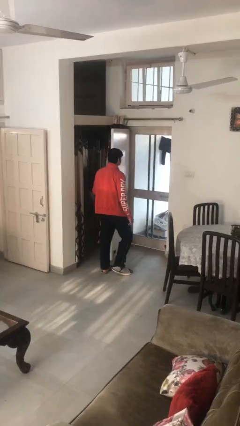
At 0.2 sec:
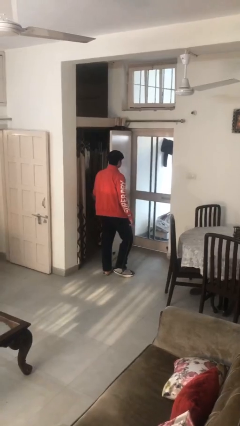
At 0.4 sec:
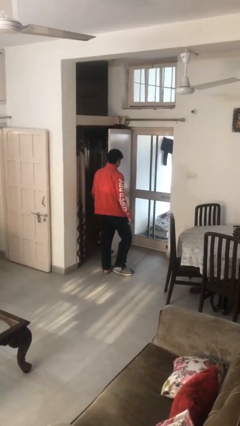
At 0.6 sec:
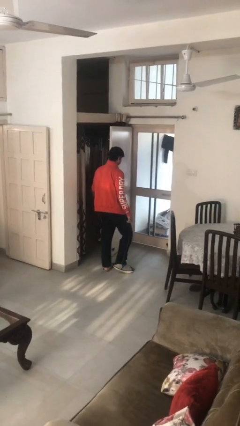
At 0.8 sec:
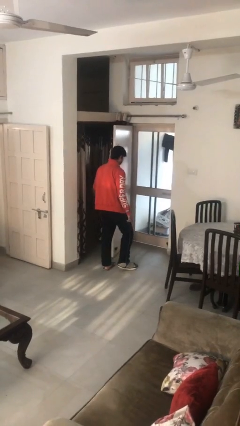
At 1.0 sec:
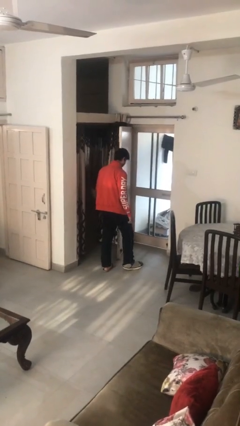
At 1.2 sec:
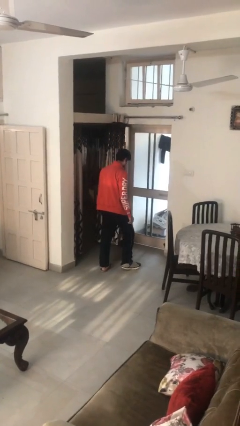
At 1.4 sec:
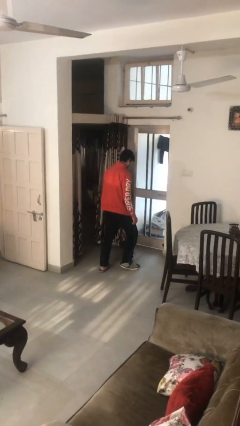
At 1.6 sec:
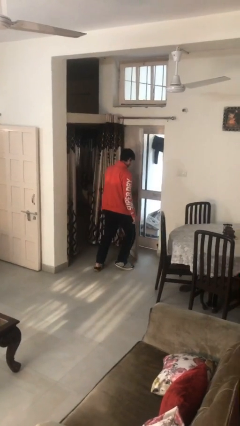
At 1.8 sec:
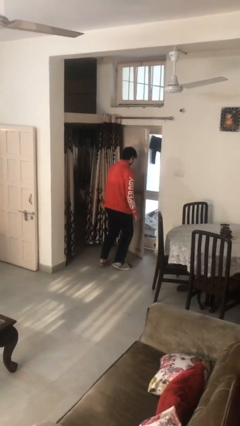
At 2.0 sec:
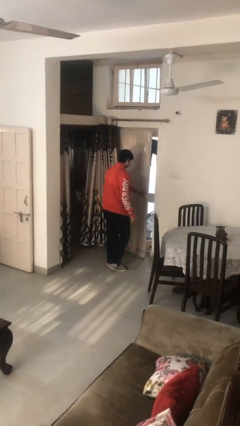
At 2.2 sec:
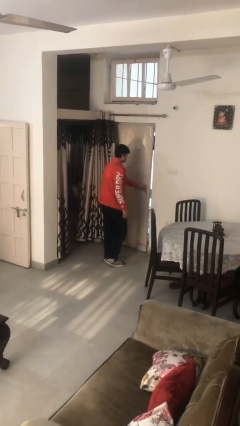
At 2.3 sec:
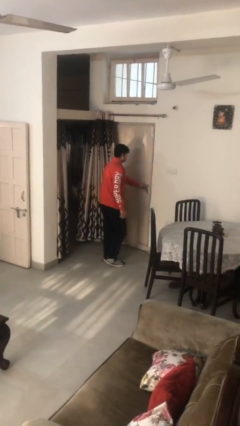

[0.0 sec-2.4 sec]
person closes facility door

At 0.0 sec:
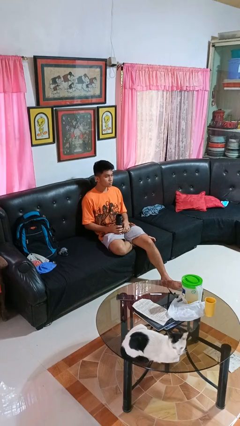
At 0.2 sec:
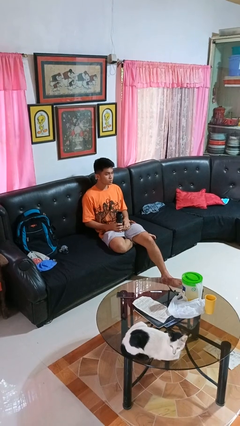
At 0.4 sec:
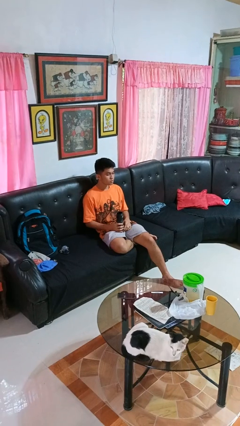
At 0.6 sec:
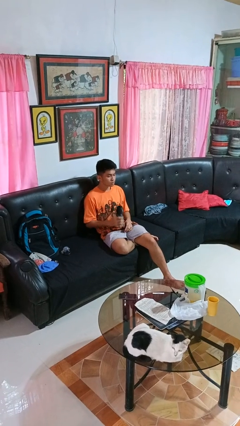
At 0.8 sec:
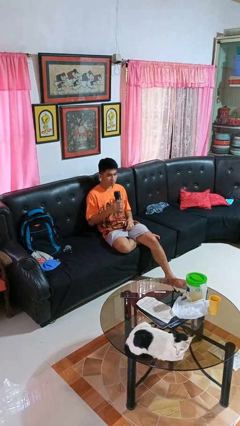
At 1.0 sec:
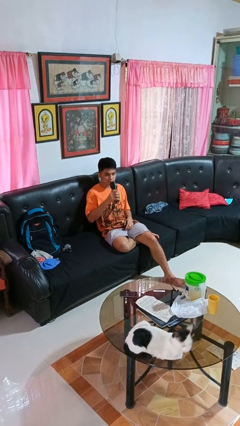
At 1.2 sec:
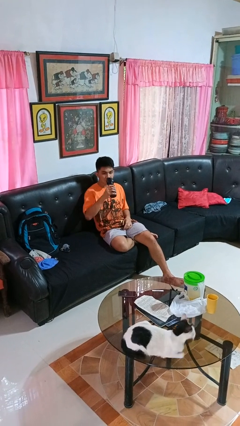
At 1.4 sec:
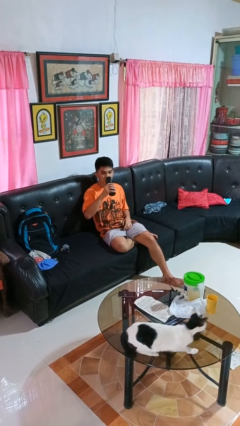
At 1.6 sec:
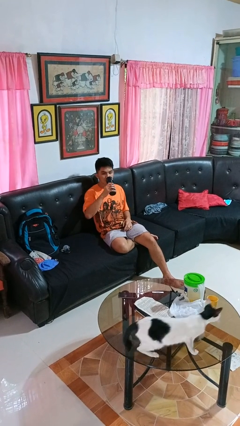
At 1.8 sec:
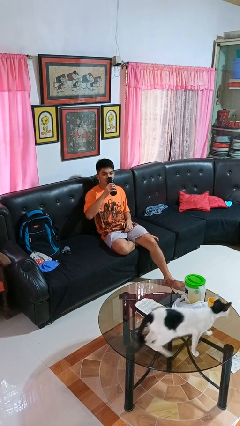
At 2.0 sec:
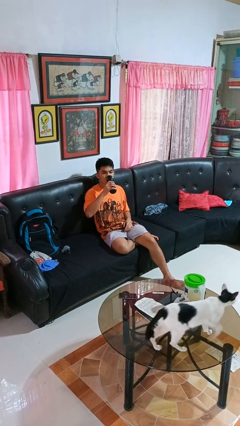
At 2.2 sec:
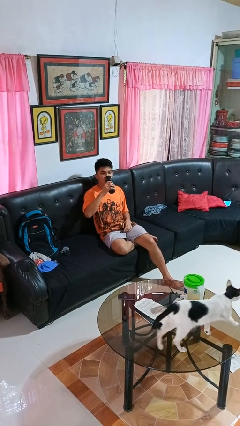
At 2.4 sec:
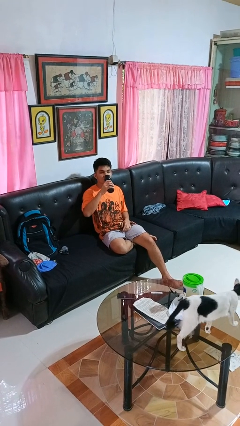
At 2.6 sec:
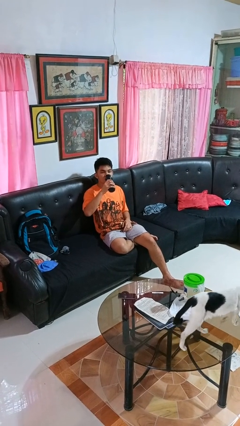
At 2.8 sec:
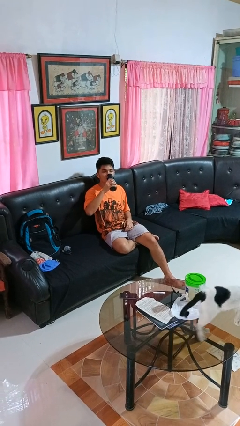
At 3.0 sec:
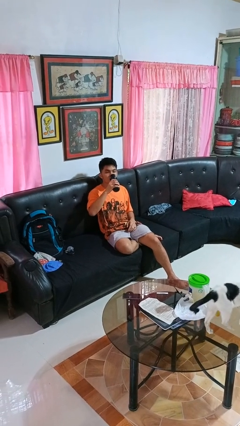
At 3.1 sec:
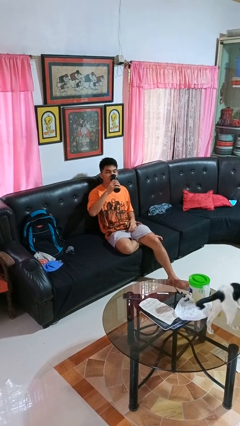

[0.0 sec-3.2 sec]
person drinks from bottle

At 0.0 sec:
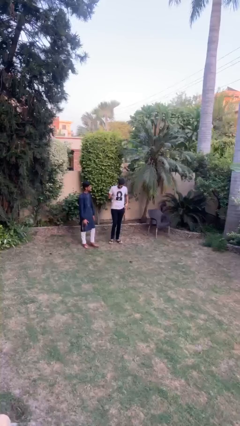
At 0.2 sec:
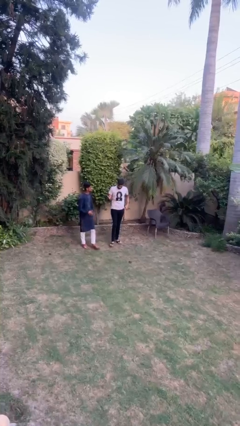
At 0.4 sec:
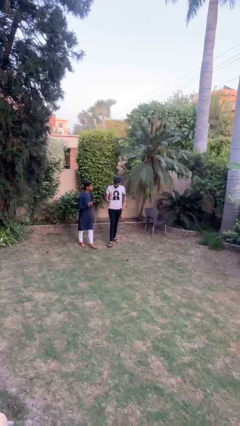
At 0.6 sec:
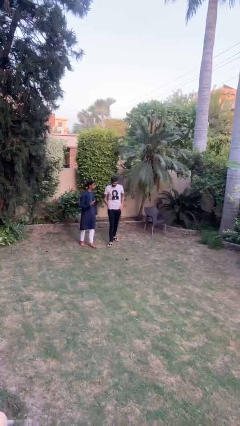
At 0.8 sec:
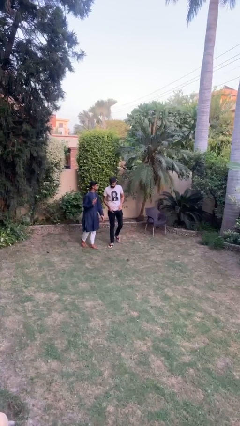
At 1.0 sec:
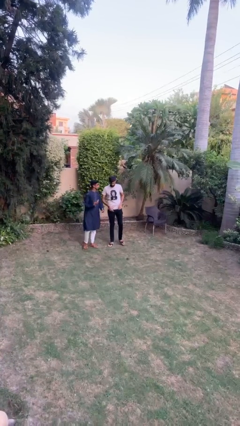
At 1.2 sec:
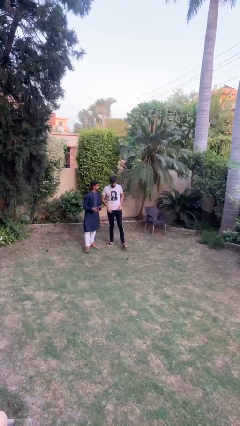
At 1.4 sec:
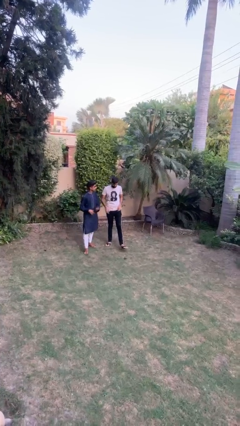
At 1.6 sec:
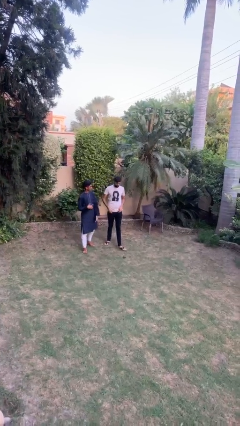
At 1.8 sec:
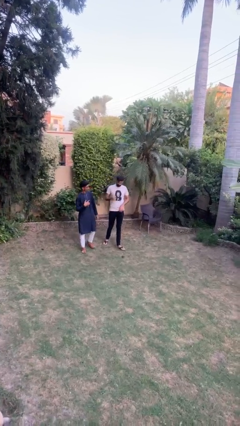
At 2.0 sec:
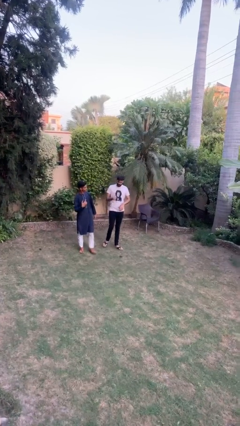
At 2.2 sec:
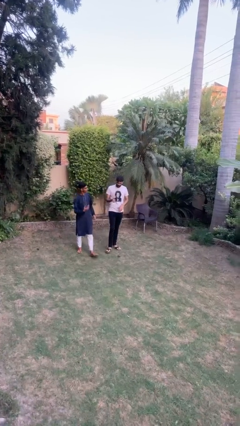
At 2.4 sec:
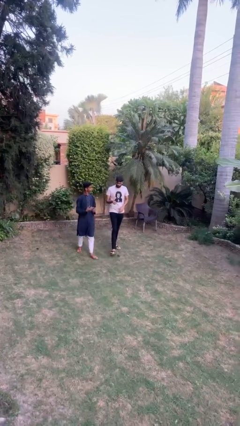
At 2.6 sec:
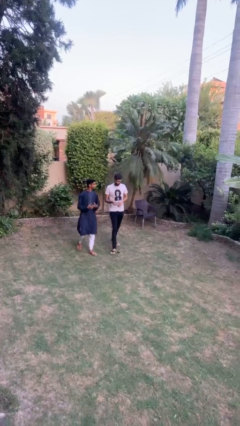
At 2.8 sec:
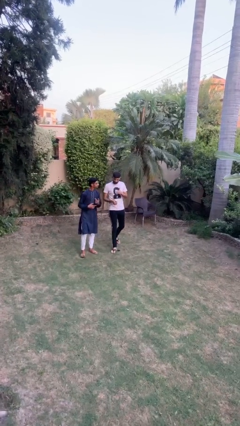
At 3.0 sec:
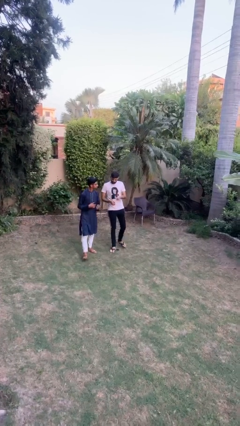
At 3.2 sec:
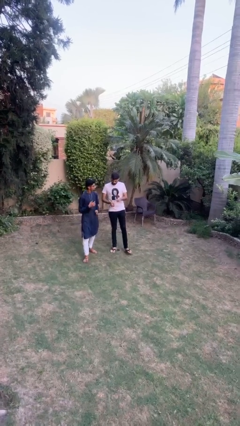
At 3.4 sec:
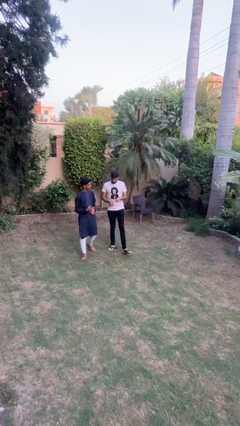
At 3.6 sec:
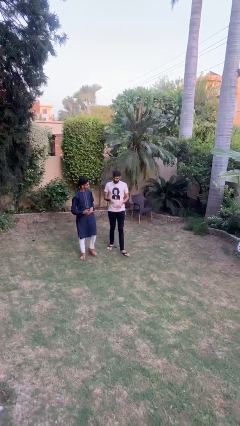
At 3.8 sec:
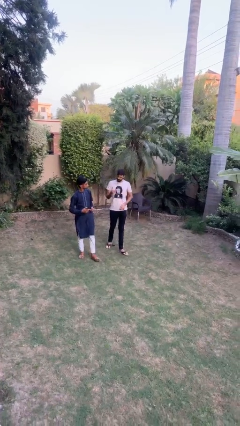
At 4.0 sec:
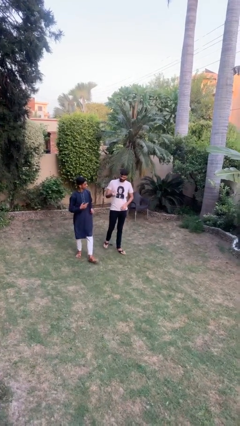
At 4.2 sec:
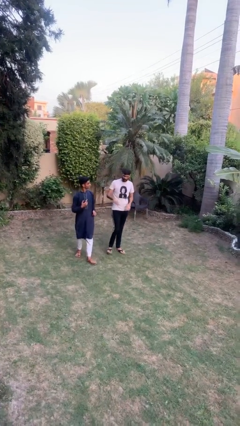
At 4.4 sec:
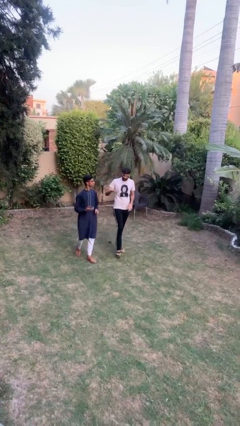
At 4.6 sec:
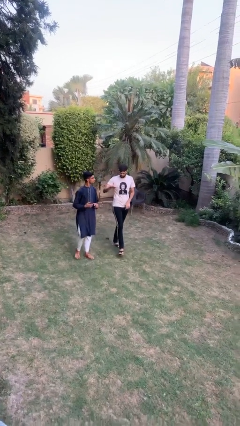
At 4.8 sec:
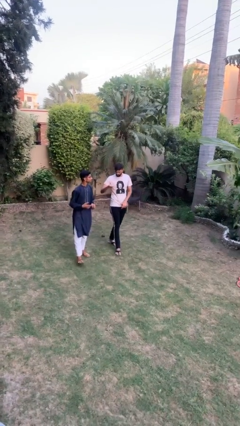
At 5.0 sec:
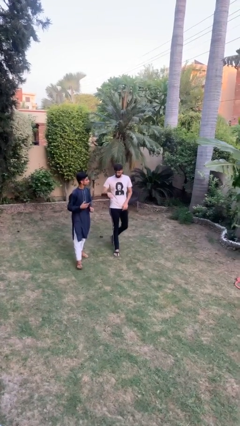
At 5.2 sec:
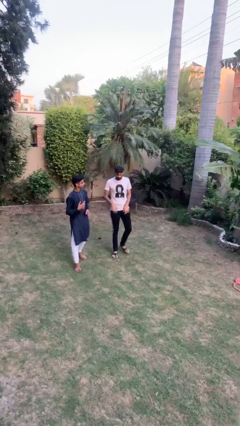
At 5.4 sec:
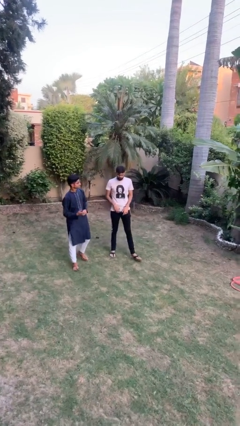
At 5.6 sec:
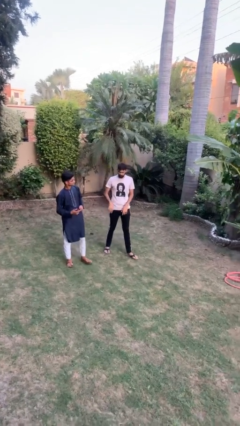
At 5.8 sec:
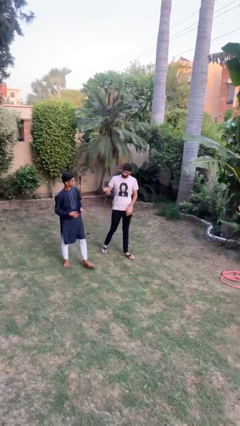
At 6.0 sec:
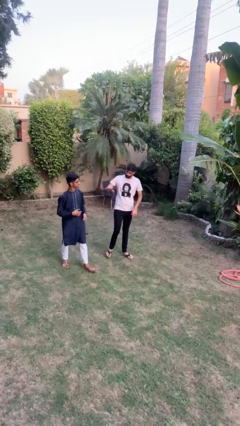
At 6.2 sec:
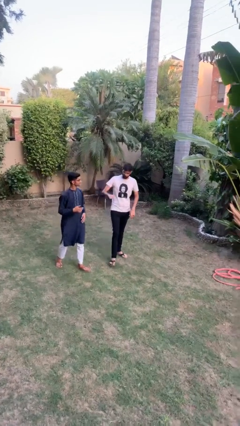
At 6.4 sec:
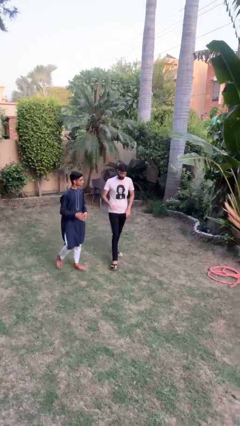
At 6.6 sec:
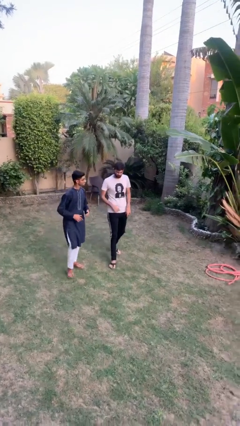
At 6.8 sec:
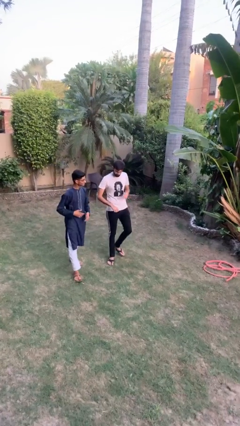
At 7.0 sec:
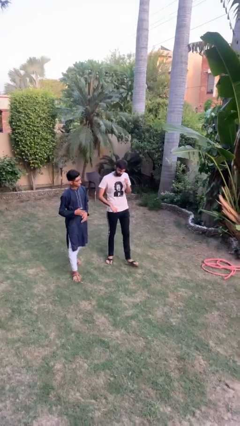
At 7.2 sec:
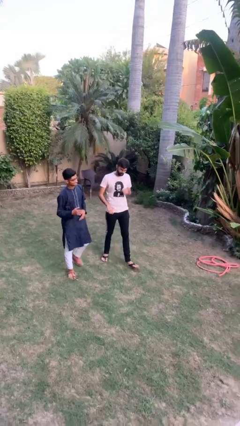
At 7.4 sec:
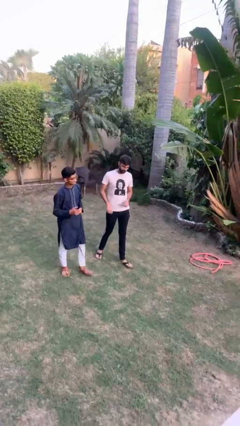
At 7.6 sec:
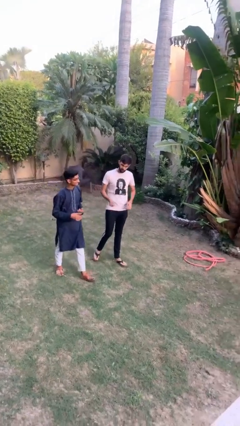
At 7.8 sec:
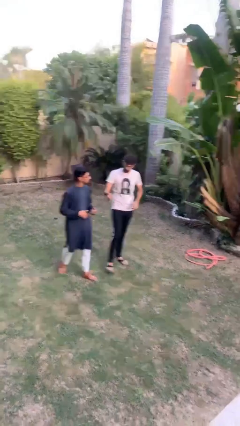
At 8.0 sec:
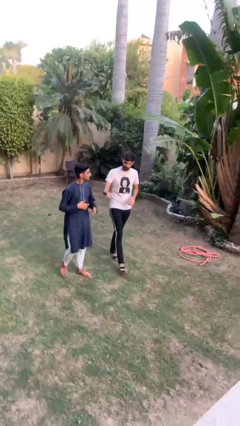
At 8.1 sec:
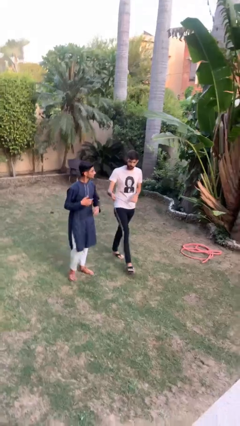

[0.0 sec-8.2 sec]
person talks to person

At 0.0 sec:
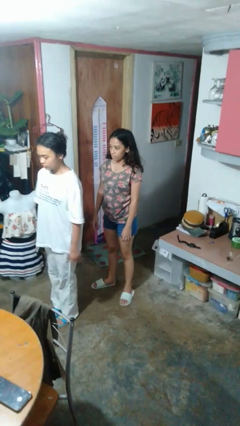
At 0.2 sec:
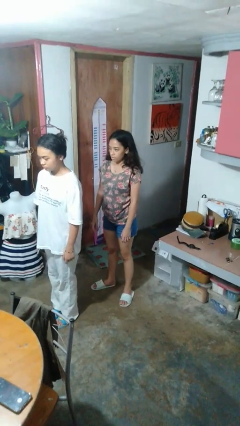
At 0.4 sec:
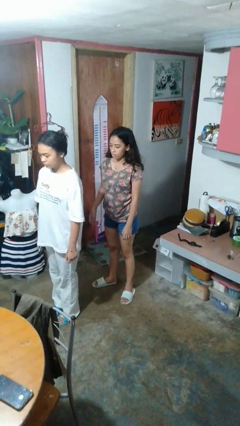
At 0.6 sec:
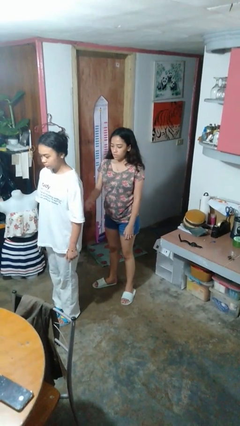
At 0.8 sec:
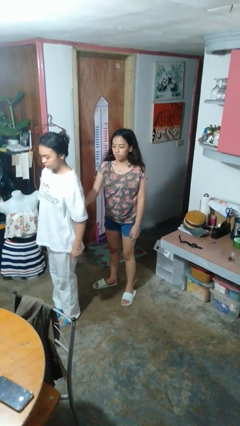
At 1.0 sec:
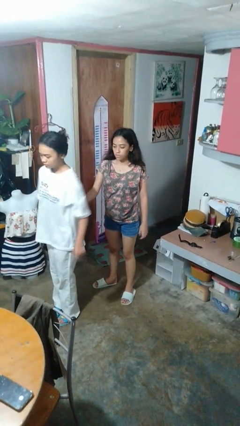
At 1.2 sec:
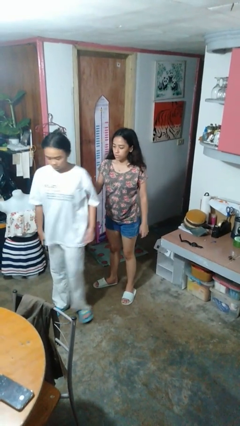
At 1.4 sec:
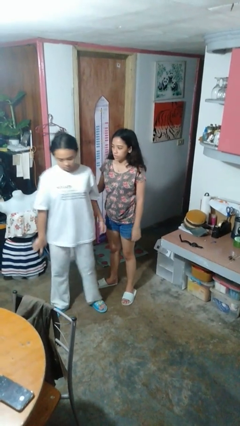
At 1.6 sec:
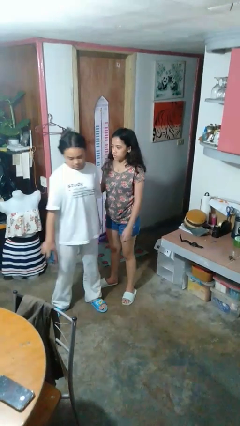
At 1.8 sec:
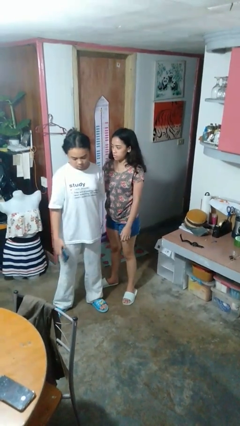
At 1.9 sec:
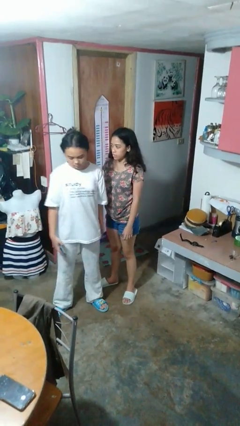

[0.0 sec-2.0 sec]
person grabs person by bicep

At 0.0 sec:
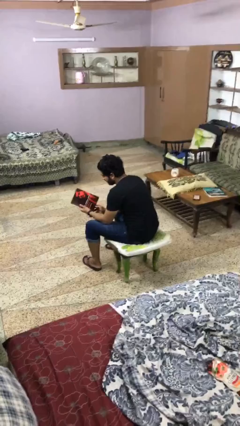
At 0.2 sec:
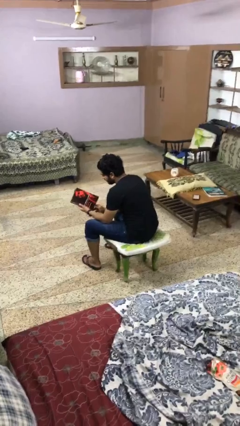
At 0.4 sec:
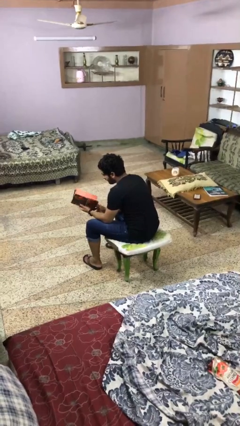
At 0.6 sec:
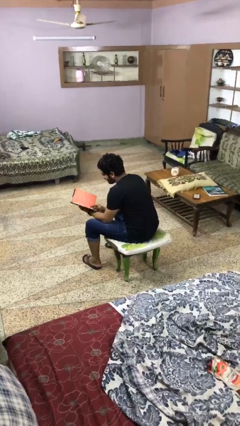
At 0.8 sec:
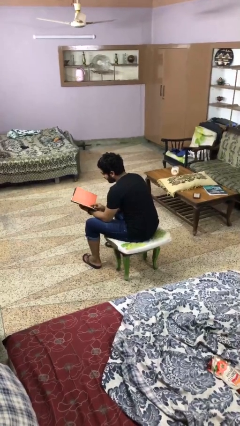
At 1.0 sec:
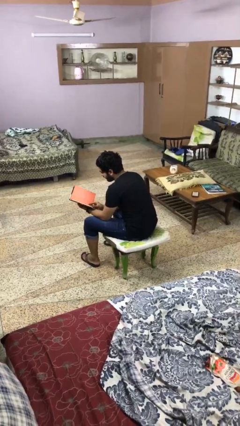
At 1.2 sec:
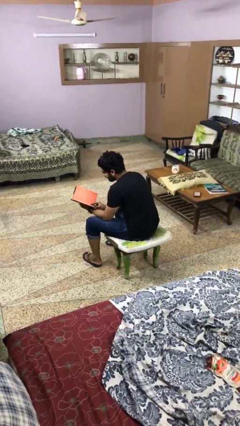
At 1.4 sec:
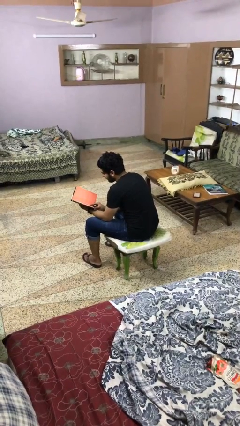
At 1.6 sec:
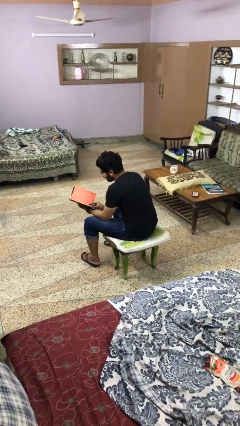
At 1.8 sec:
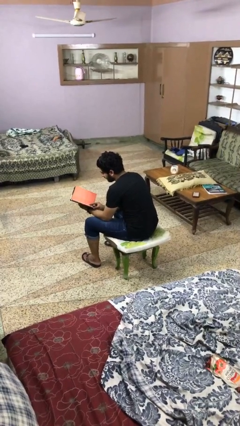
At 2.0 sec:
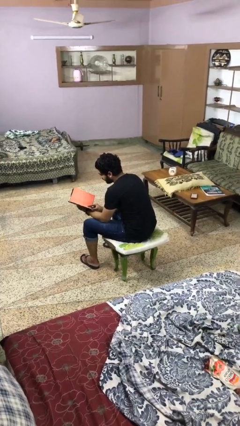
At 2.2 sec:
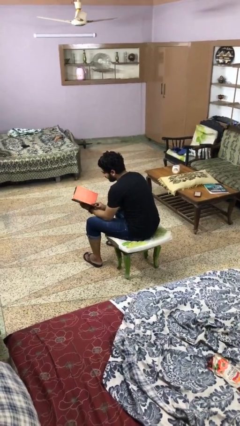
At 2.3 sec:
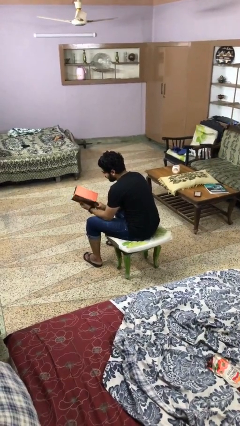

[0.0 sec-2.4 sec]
person reads magazine
